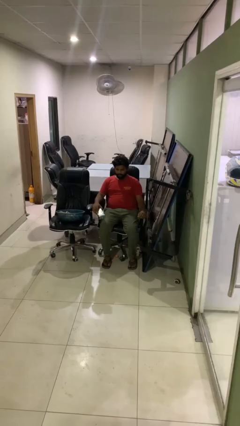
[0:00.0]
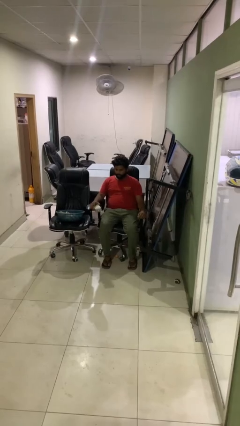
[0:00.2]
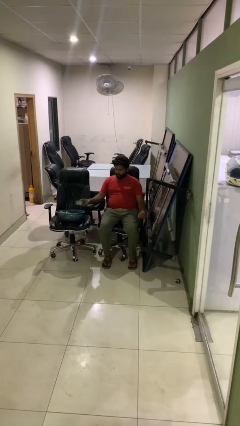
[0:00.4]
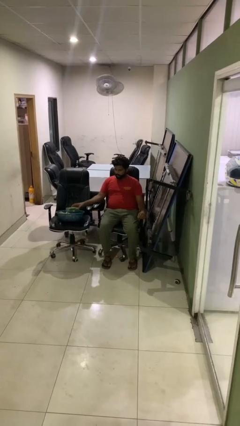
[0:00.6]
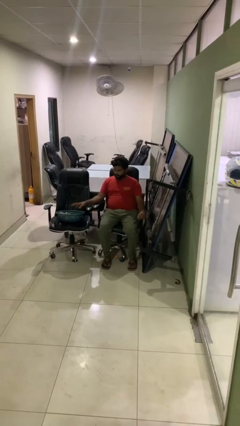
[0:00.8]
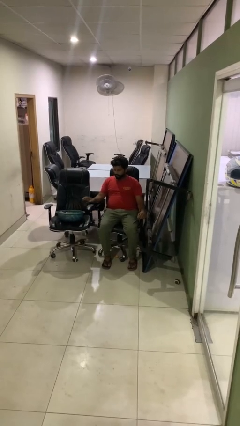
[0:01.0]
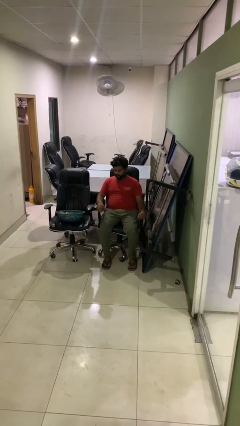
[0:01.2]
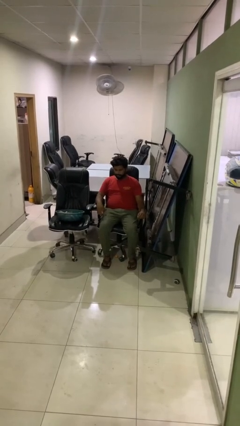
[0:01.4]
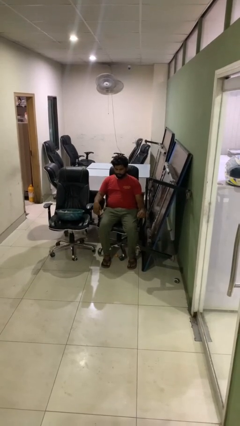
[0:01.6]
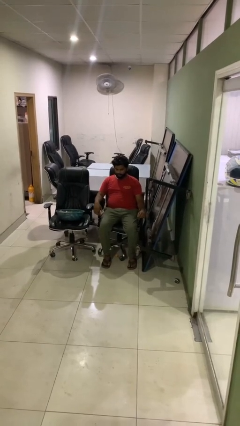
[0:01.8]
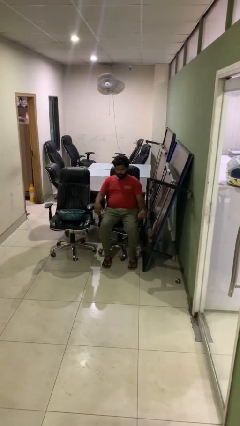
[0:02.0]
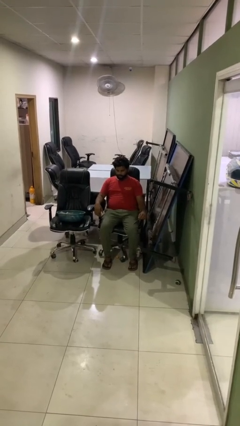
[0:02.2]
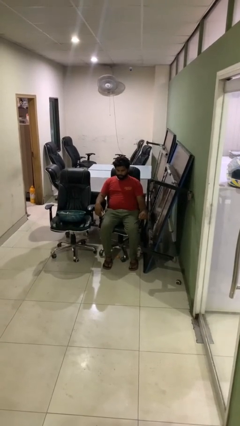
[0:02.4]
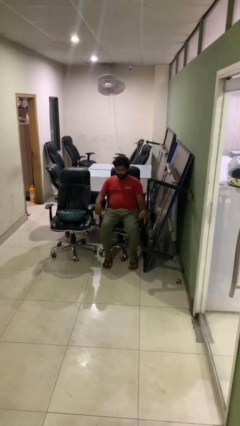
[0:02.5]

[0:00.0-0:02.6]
person puts object into basket

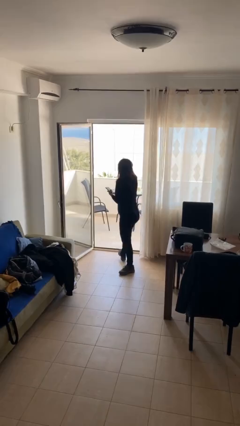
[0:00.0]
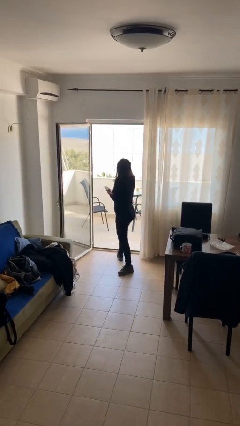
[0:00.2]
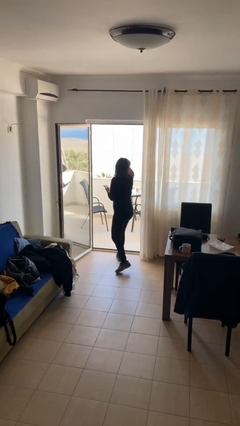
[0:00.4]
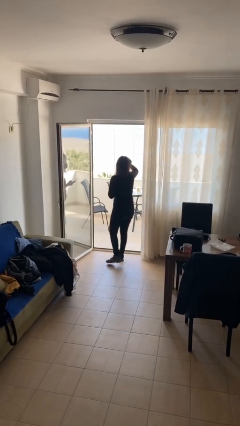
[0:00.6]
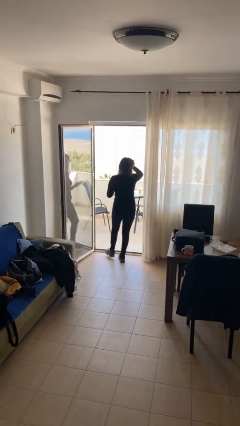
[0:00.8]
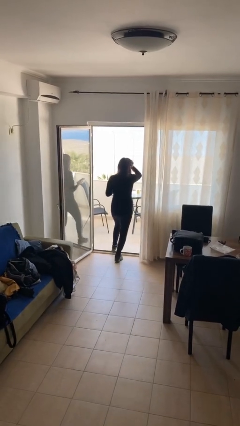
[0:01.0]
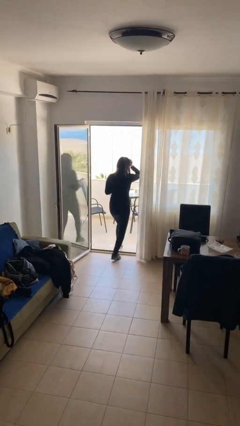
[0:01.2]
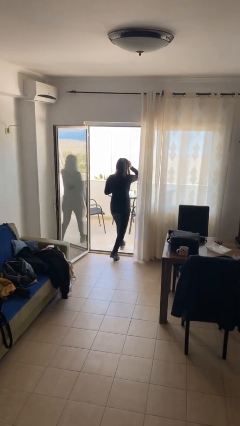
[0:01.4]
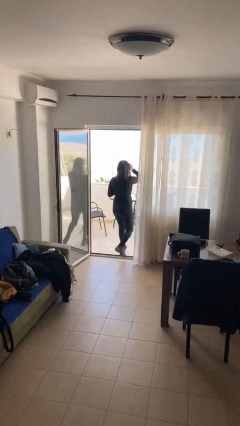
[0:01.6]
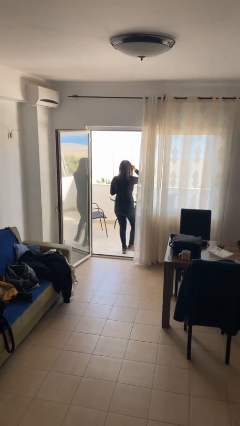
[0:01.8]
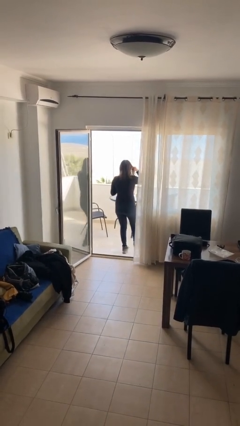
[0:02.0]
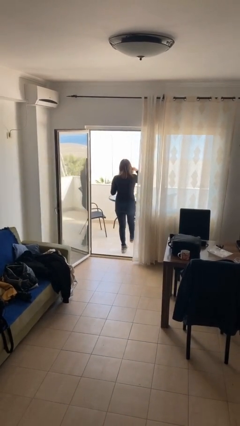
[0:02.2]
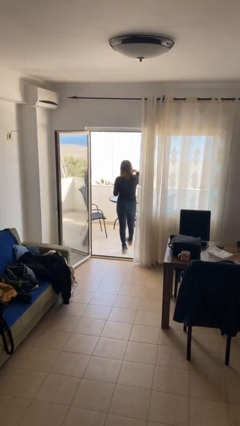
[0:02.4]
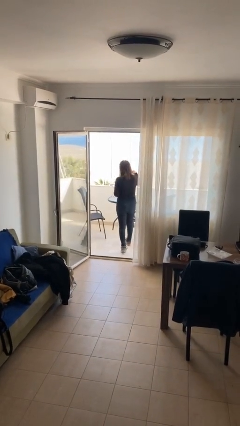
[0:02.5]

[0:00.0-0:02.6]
person exits scene through structure

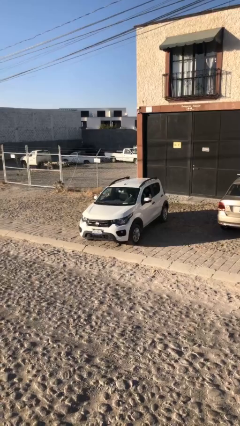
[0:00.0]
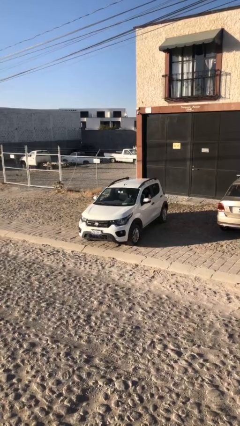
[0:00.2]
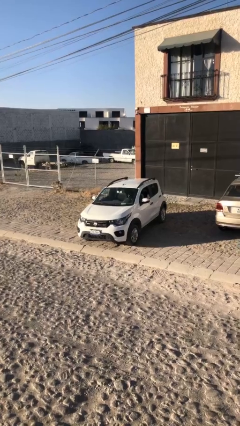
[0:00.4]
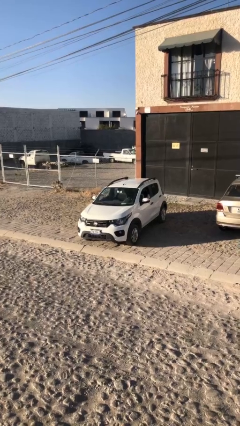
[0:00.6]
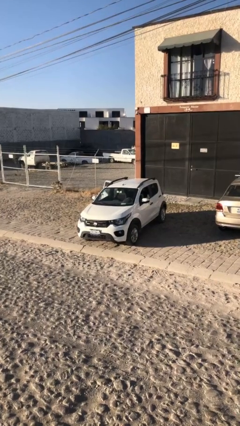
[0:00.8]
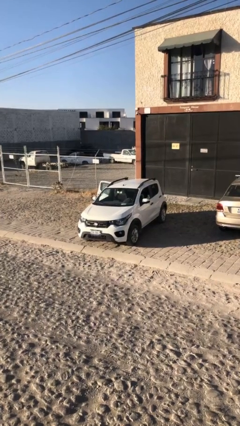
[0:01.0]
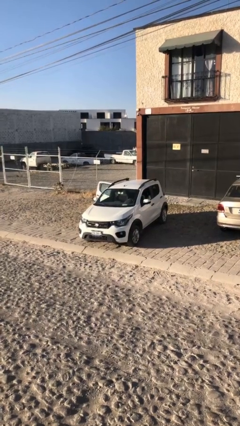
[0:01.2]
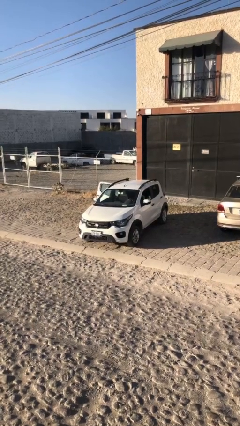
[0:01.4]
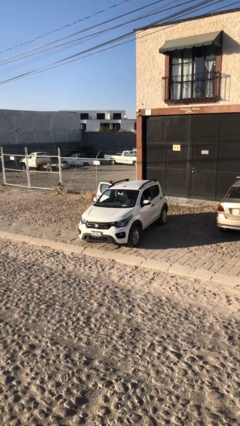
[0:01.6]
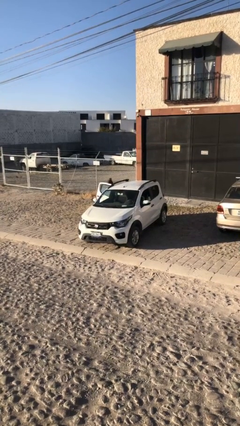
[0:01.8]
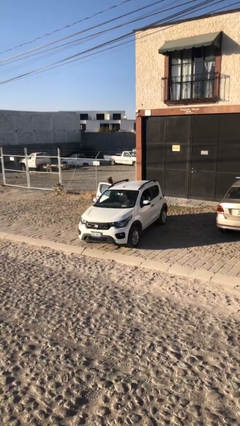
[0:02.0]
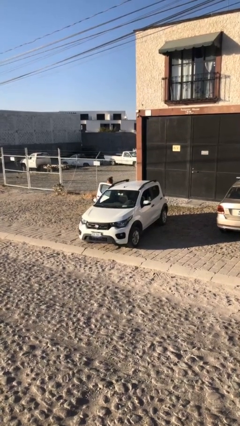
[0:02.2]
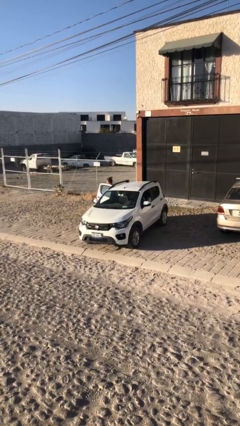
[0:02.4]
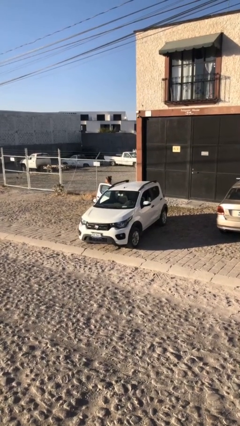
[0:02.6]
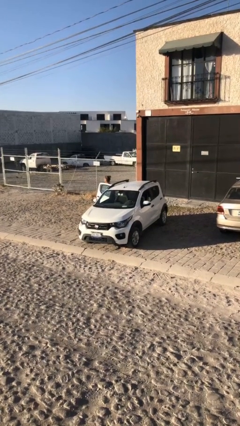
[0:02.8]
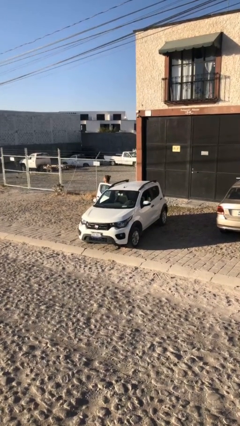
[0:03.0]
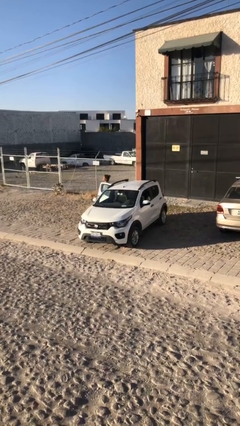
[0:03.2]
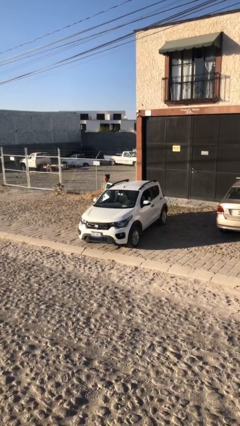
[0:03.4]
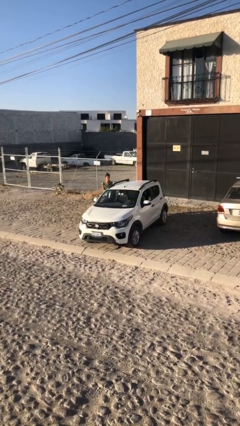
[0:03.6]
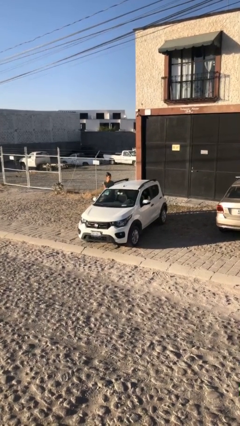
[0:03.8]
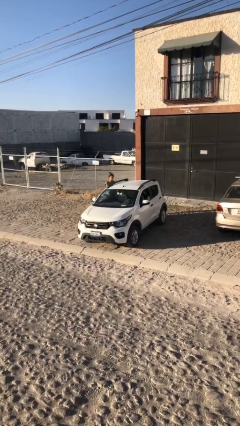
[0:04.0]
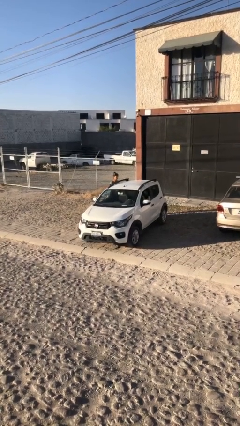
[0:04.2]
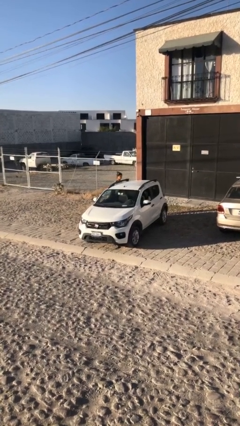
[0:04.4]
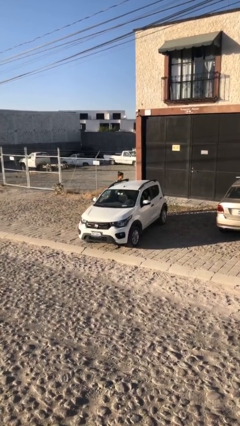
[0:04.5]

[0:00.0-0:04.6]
car drops off person

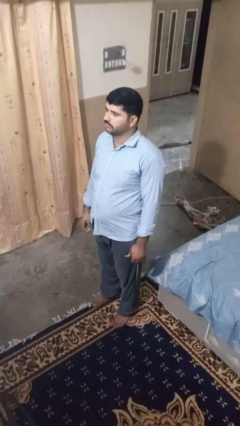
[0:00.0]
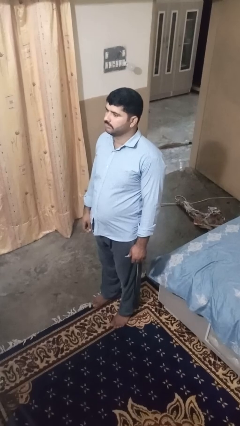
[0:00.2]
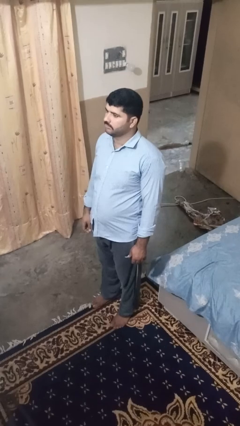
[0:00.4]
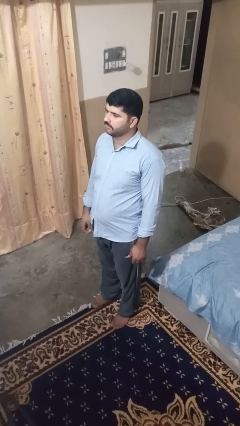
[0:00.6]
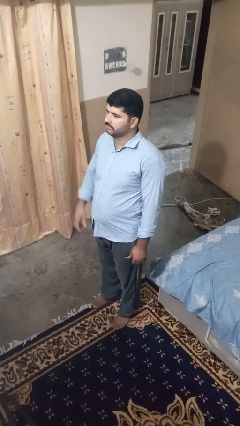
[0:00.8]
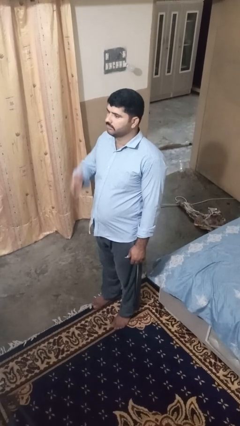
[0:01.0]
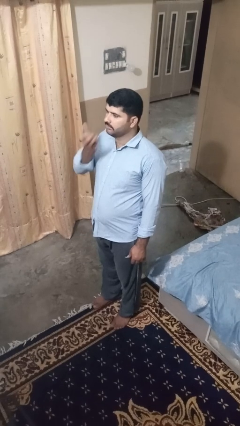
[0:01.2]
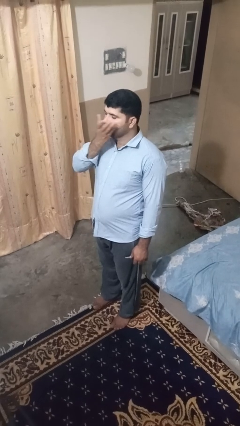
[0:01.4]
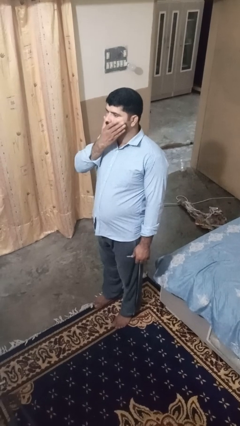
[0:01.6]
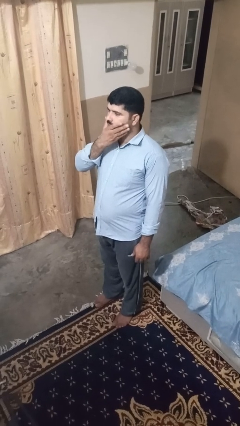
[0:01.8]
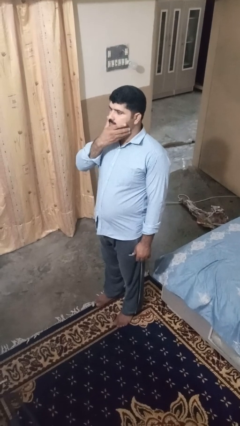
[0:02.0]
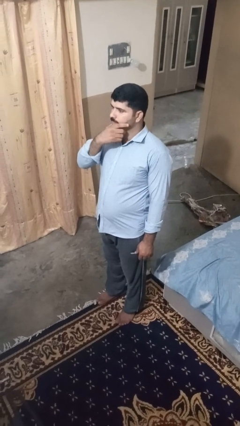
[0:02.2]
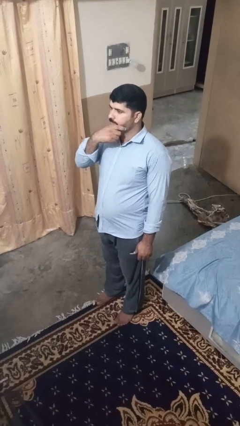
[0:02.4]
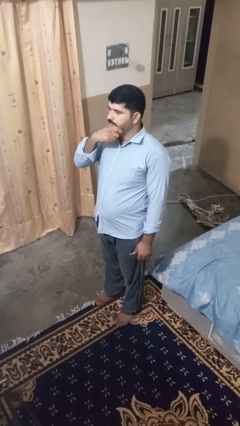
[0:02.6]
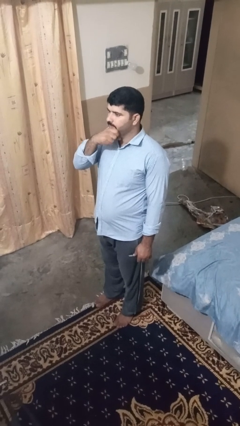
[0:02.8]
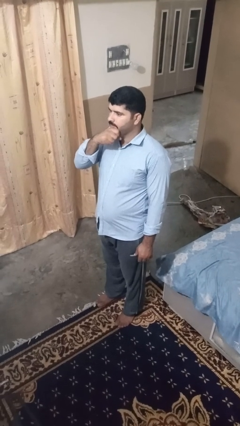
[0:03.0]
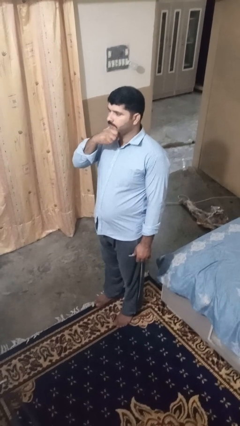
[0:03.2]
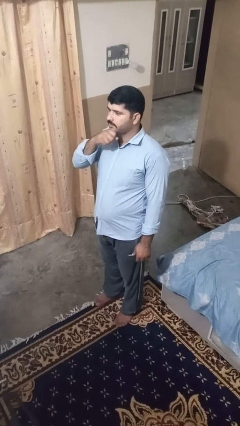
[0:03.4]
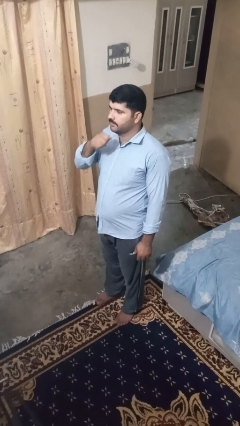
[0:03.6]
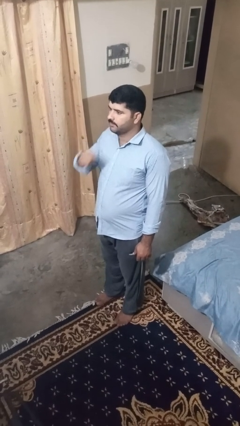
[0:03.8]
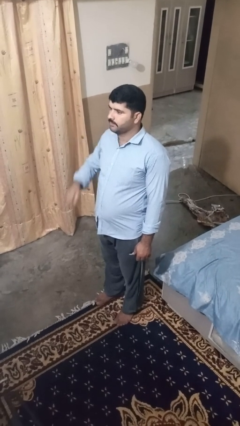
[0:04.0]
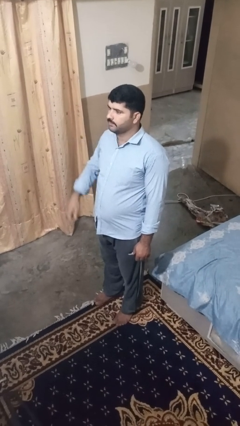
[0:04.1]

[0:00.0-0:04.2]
person strokes chin

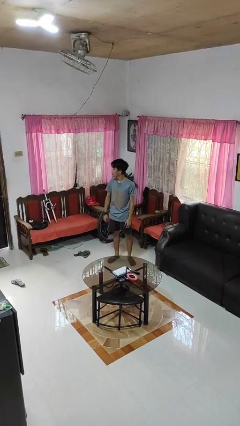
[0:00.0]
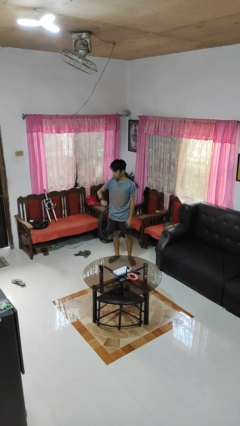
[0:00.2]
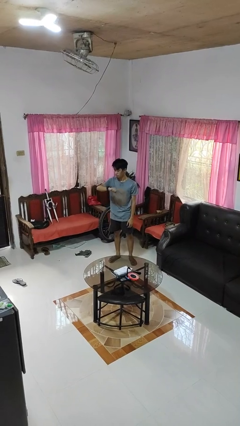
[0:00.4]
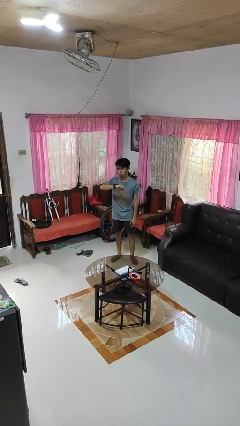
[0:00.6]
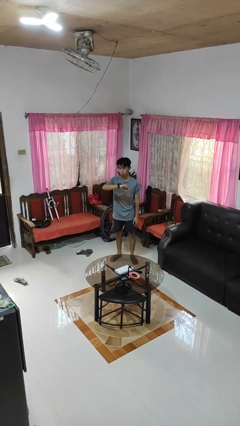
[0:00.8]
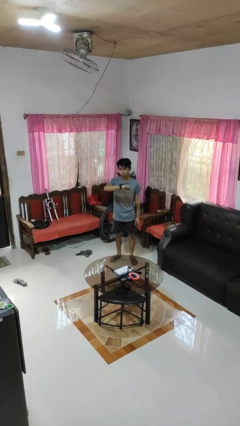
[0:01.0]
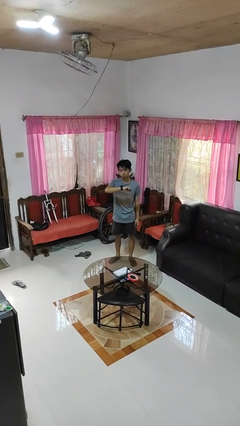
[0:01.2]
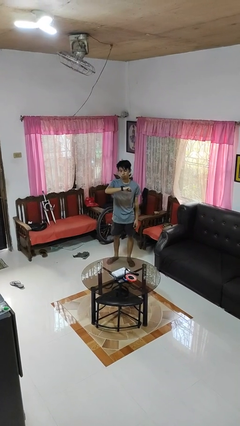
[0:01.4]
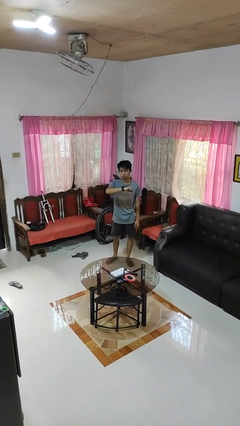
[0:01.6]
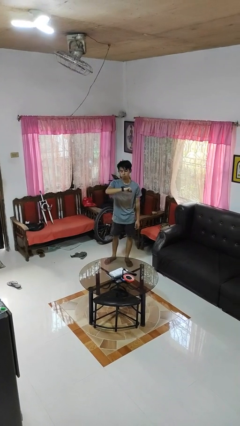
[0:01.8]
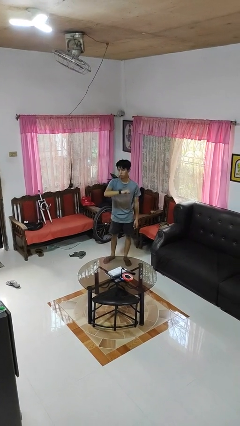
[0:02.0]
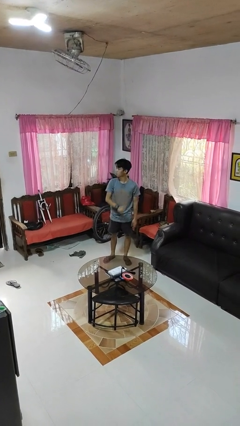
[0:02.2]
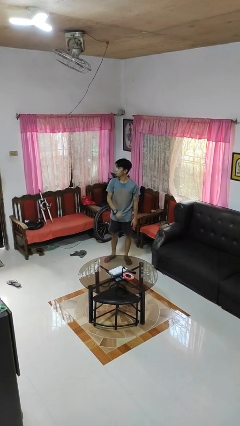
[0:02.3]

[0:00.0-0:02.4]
person looks at wristwatch

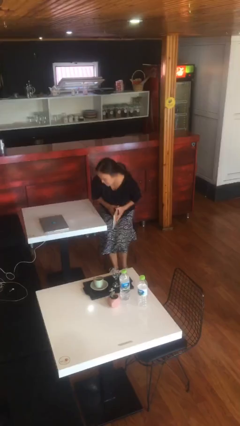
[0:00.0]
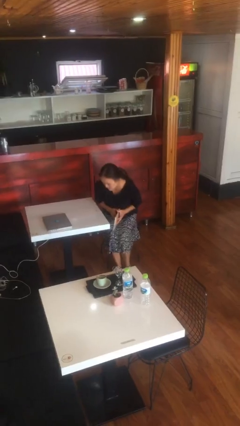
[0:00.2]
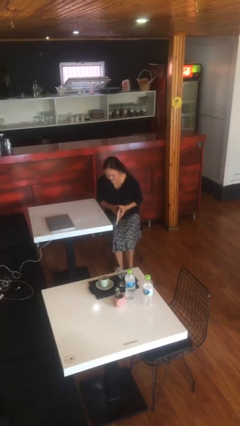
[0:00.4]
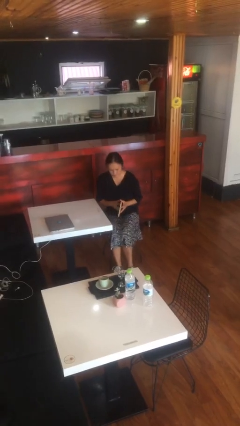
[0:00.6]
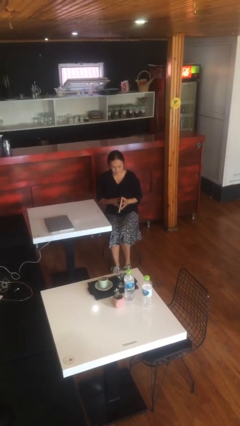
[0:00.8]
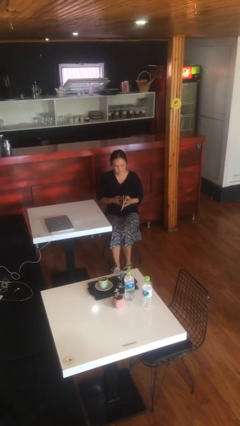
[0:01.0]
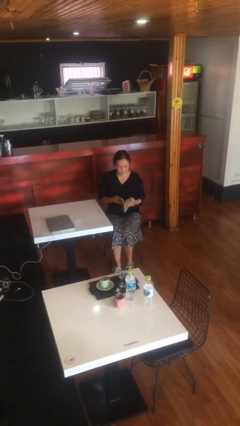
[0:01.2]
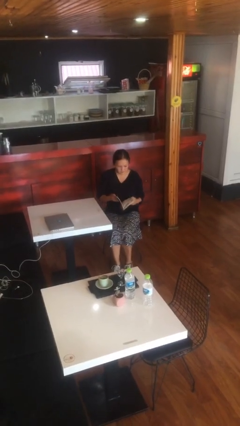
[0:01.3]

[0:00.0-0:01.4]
person sits down
